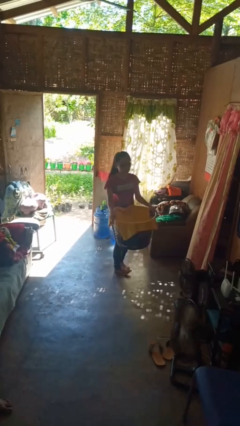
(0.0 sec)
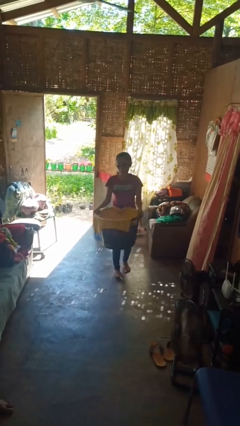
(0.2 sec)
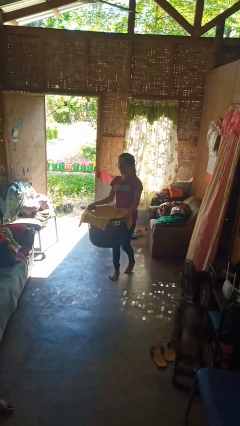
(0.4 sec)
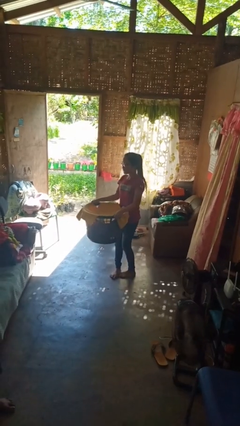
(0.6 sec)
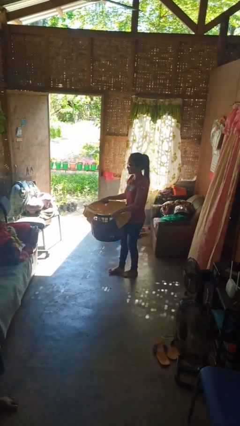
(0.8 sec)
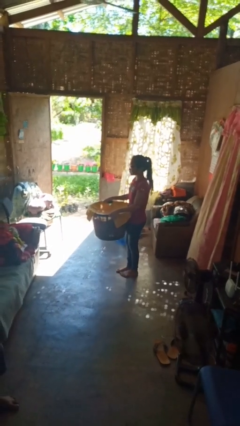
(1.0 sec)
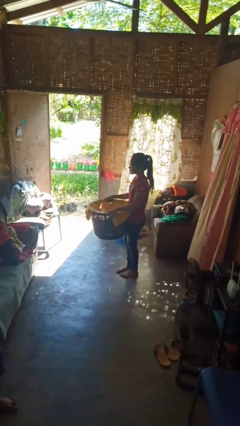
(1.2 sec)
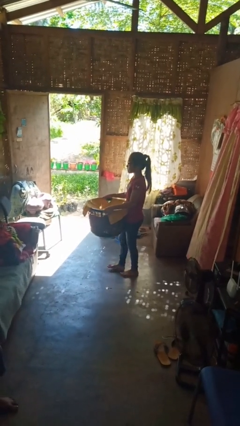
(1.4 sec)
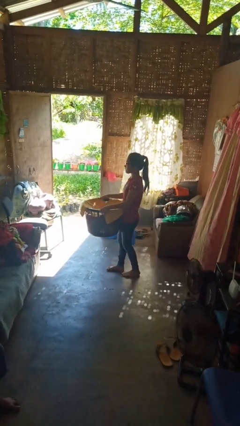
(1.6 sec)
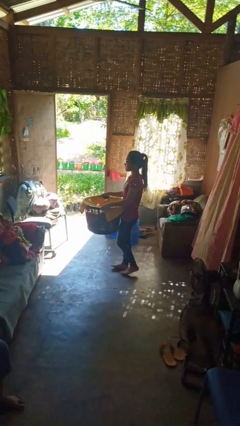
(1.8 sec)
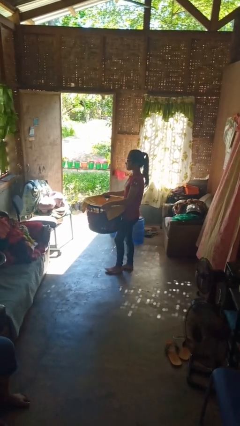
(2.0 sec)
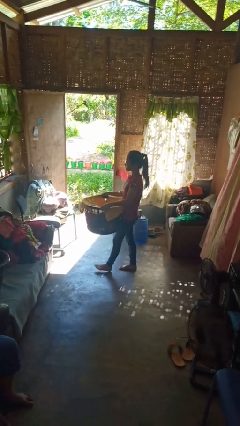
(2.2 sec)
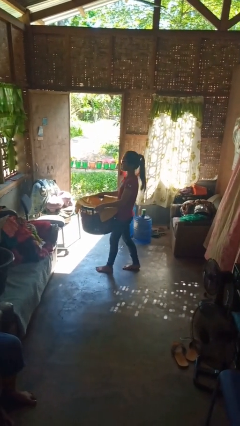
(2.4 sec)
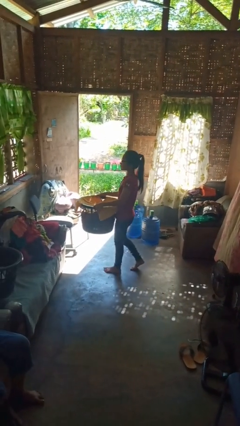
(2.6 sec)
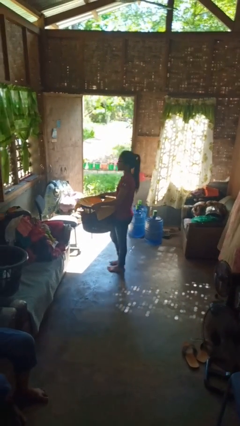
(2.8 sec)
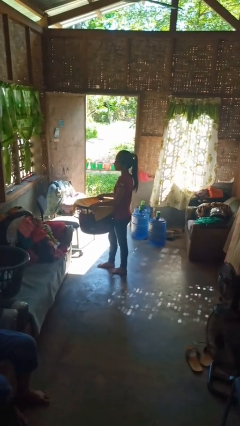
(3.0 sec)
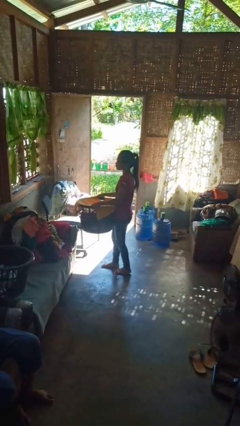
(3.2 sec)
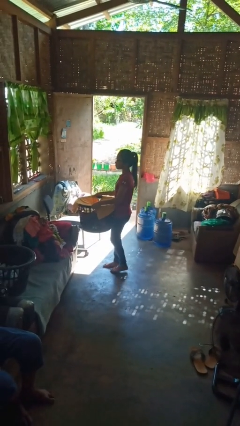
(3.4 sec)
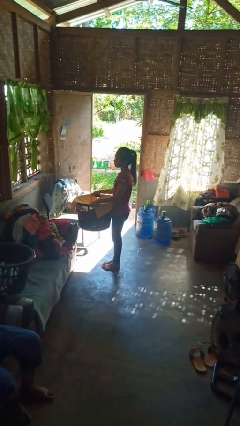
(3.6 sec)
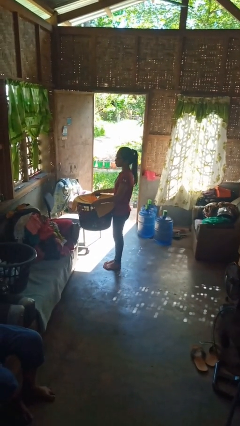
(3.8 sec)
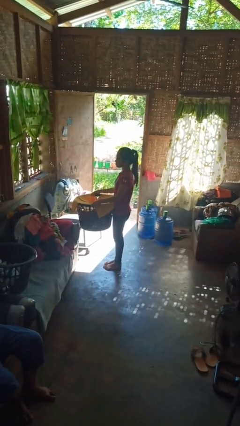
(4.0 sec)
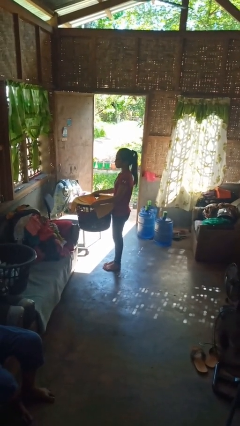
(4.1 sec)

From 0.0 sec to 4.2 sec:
person carries laundry basket

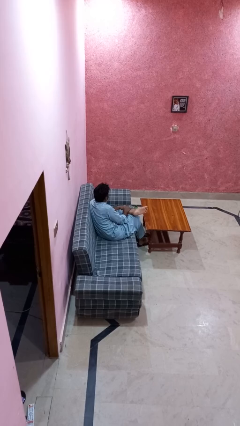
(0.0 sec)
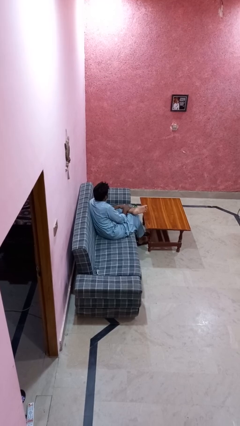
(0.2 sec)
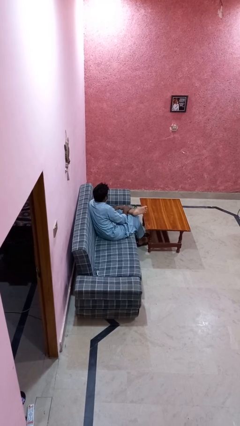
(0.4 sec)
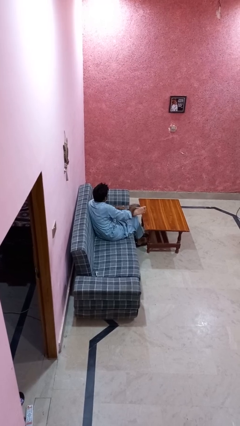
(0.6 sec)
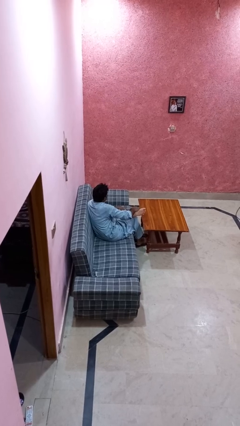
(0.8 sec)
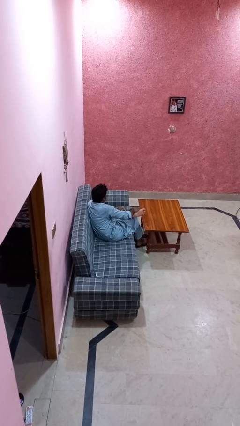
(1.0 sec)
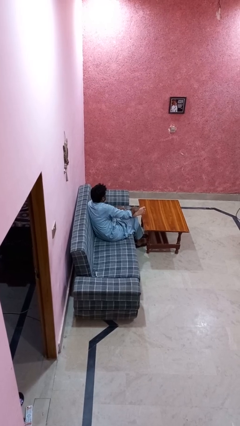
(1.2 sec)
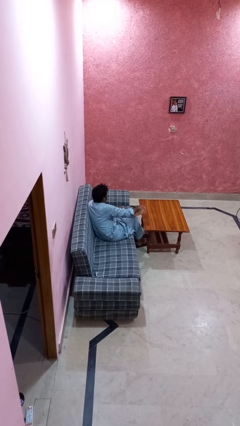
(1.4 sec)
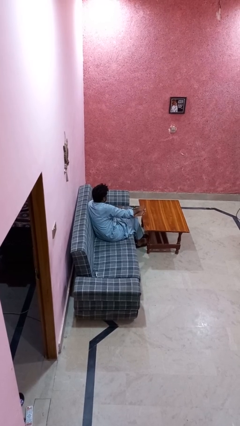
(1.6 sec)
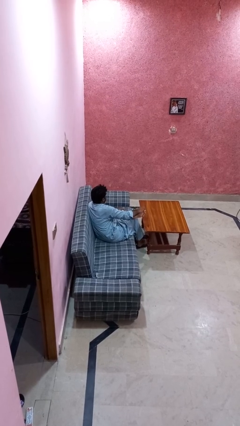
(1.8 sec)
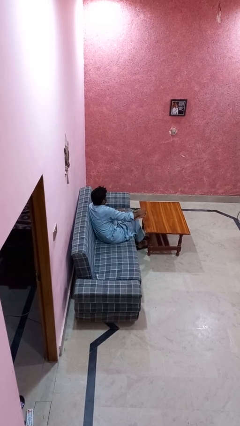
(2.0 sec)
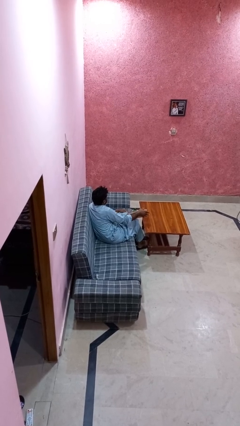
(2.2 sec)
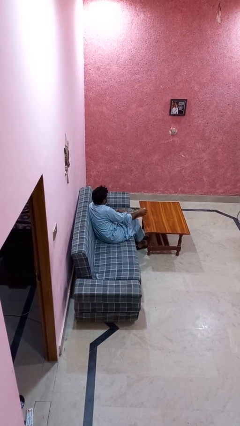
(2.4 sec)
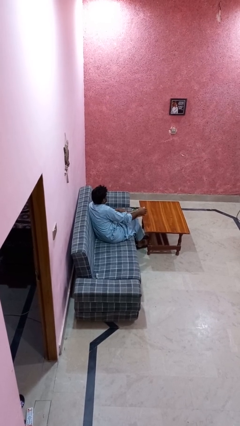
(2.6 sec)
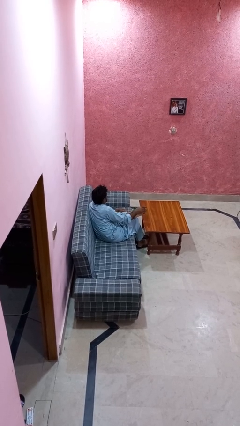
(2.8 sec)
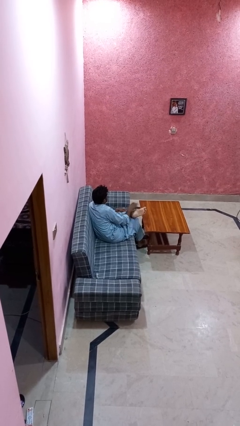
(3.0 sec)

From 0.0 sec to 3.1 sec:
person rubs foot

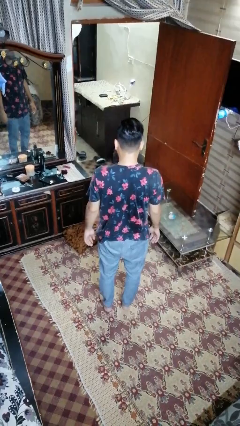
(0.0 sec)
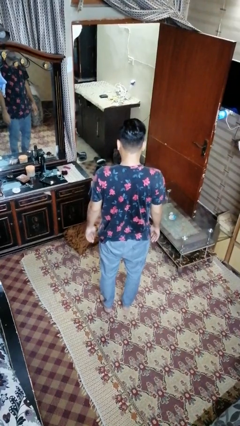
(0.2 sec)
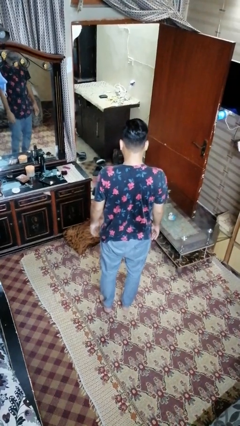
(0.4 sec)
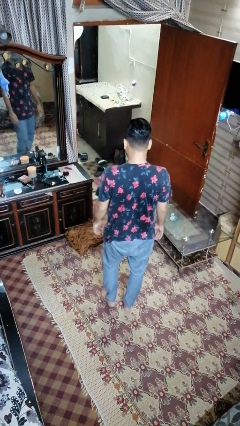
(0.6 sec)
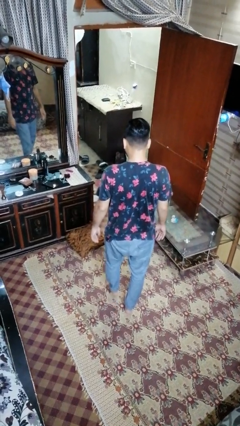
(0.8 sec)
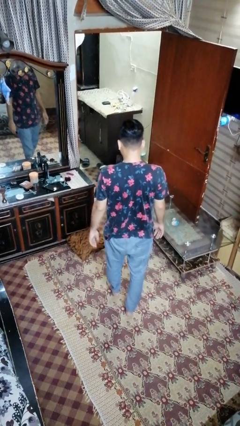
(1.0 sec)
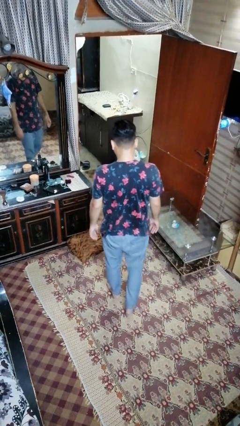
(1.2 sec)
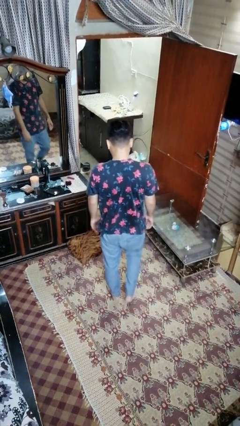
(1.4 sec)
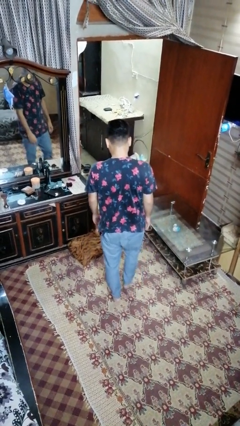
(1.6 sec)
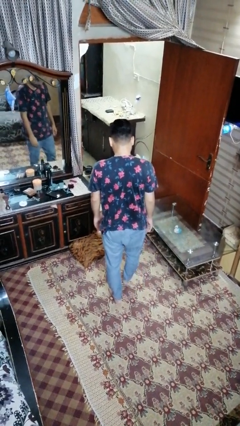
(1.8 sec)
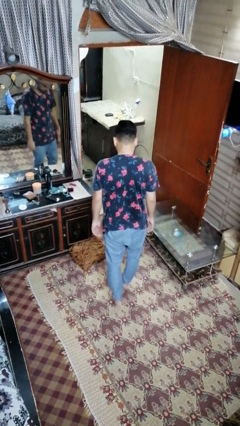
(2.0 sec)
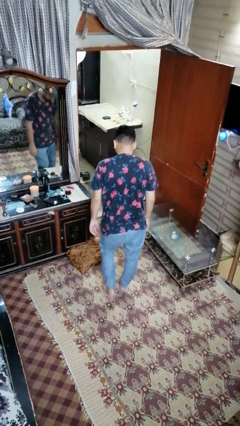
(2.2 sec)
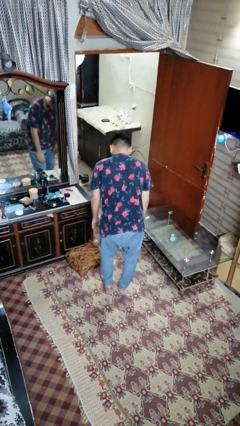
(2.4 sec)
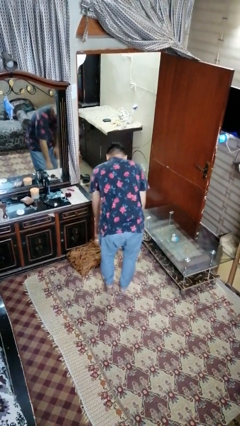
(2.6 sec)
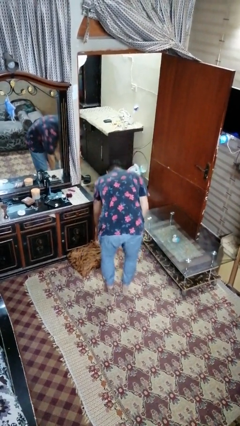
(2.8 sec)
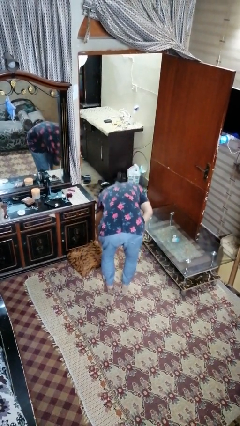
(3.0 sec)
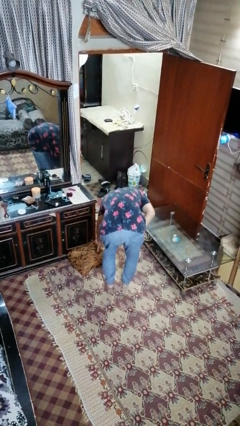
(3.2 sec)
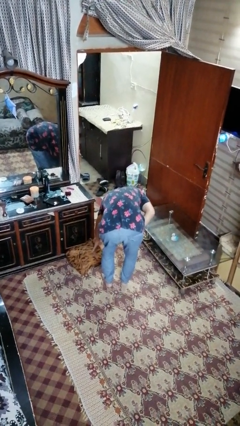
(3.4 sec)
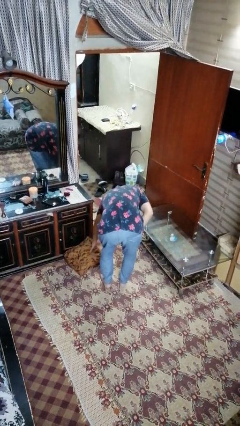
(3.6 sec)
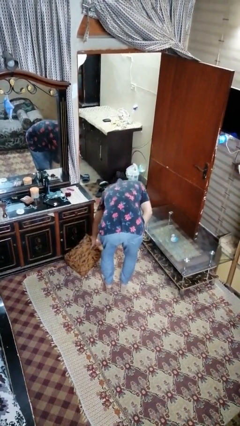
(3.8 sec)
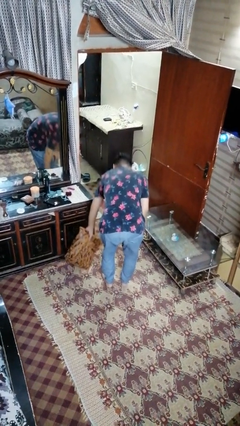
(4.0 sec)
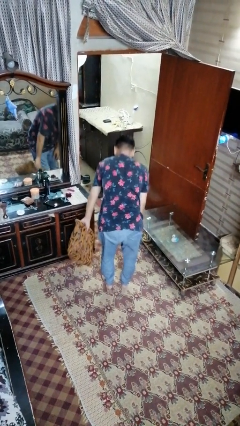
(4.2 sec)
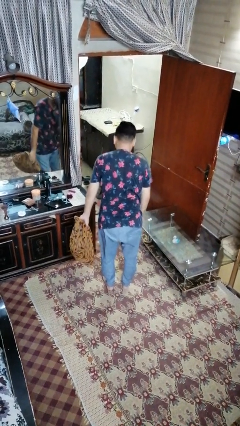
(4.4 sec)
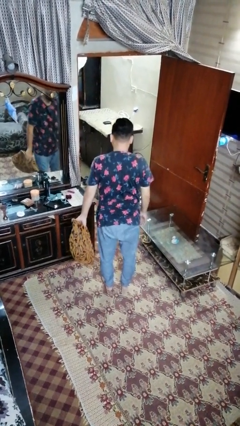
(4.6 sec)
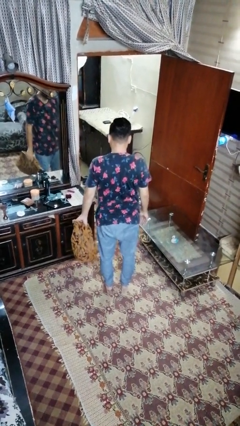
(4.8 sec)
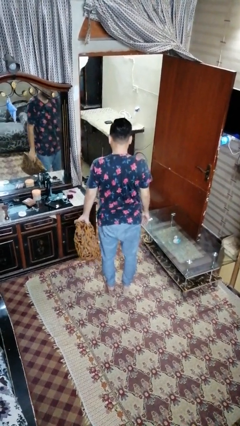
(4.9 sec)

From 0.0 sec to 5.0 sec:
person picks up object from floor

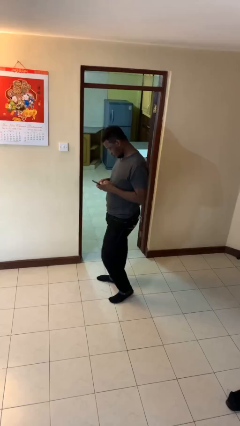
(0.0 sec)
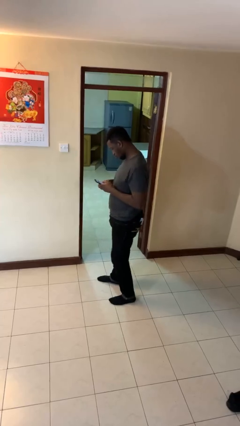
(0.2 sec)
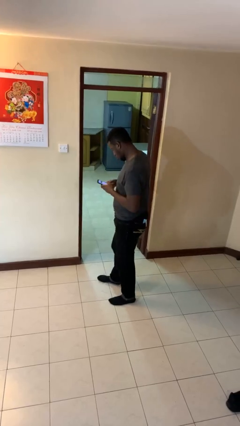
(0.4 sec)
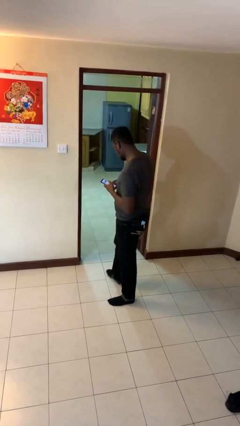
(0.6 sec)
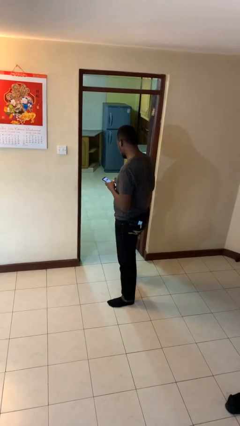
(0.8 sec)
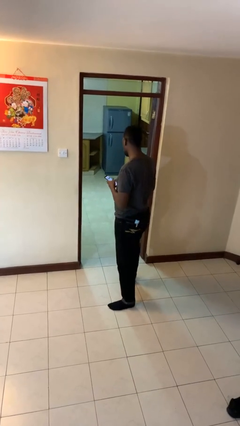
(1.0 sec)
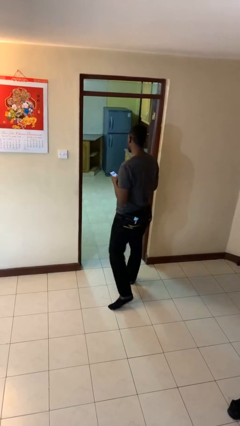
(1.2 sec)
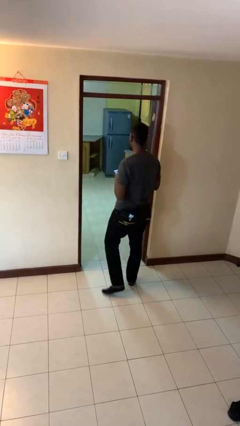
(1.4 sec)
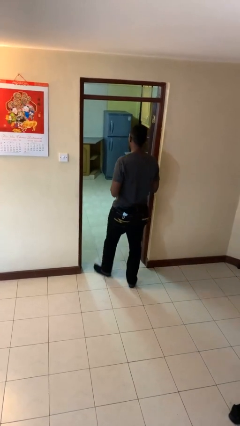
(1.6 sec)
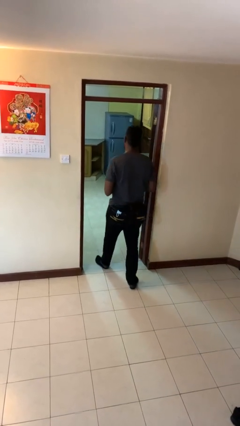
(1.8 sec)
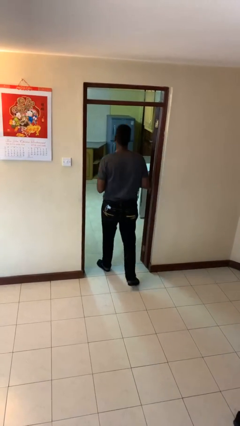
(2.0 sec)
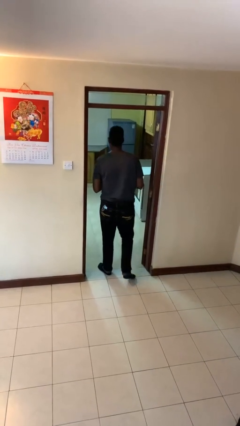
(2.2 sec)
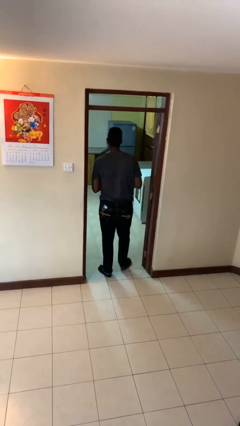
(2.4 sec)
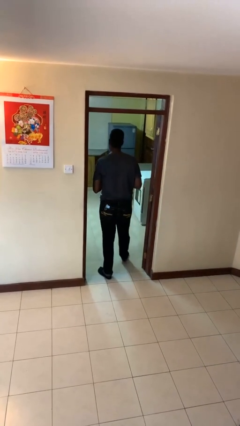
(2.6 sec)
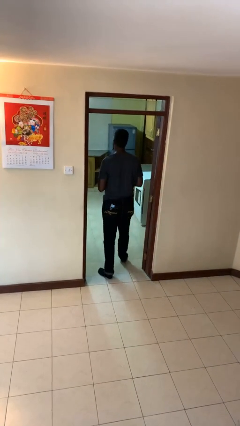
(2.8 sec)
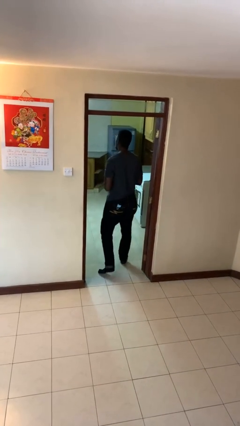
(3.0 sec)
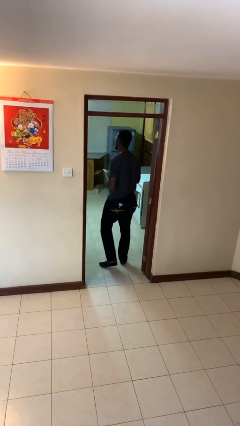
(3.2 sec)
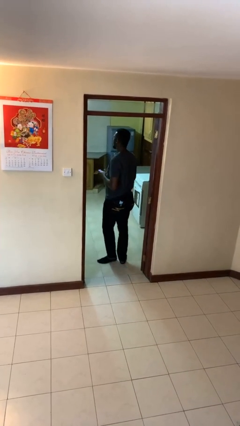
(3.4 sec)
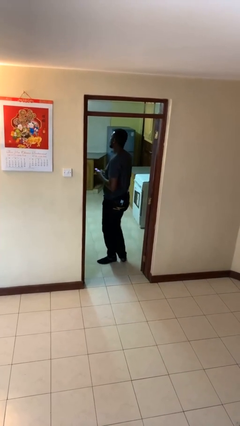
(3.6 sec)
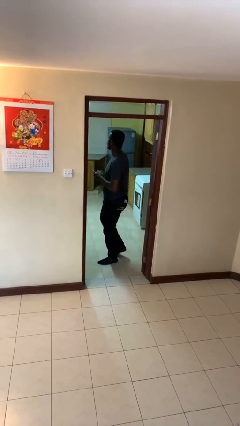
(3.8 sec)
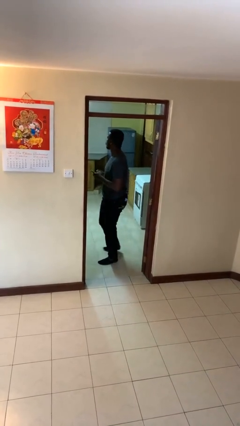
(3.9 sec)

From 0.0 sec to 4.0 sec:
person exits scene through structure

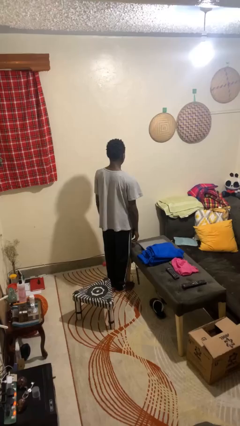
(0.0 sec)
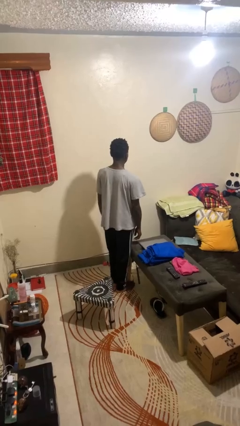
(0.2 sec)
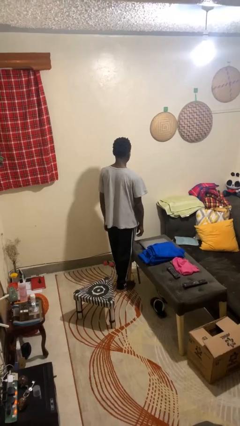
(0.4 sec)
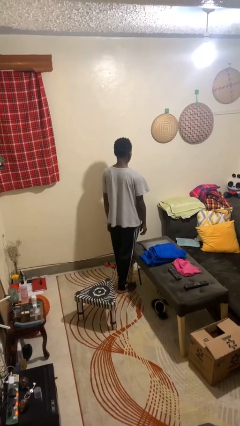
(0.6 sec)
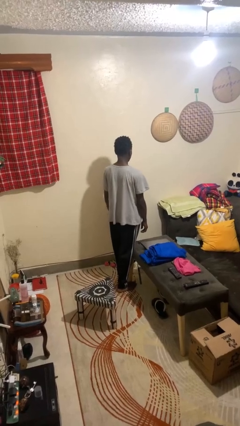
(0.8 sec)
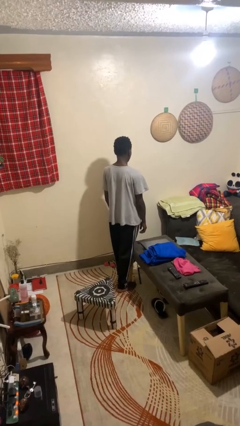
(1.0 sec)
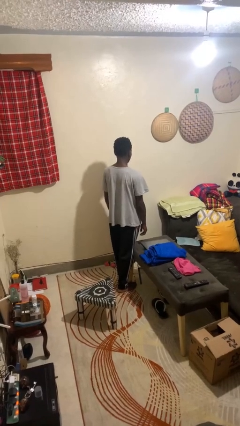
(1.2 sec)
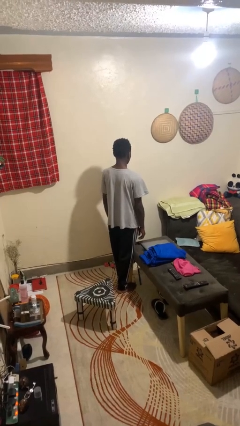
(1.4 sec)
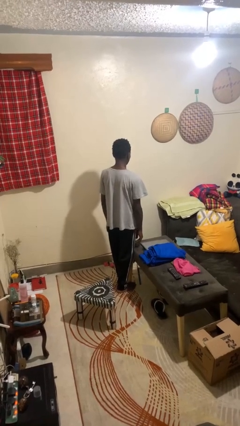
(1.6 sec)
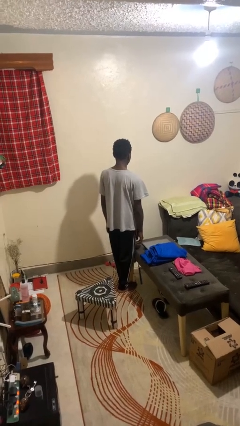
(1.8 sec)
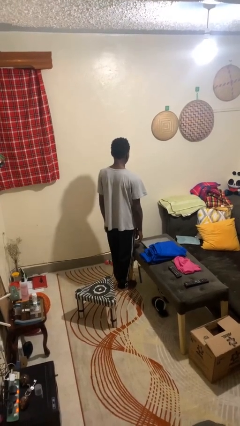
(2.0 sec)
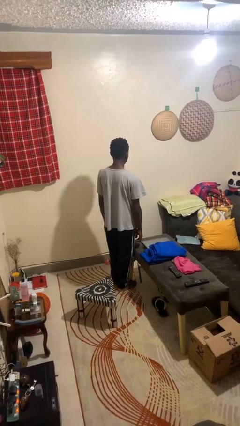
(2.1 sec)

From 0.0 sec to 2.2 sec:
person bumps into table
